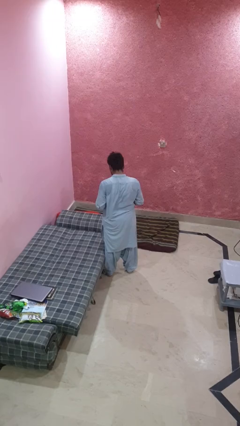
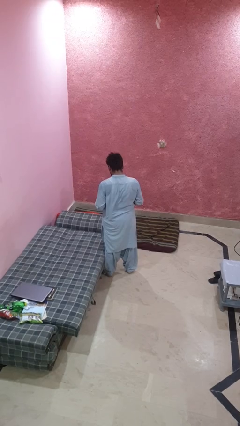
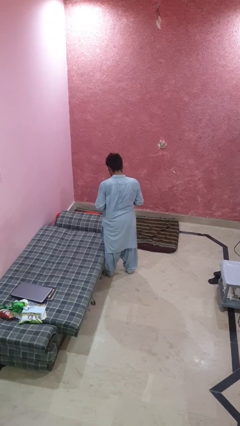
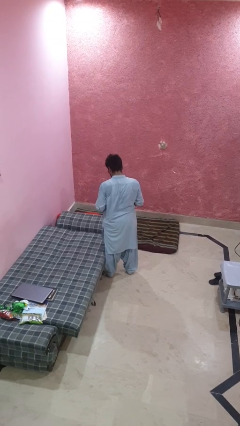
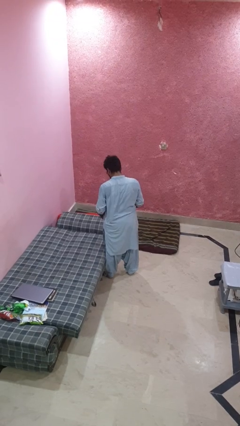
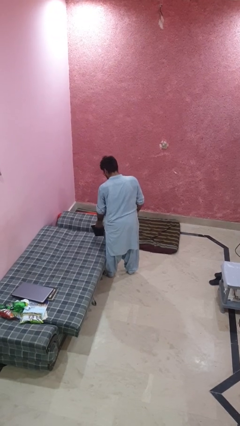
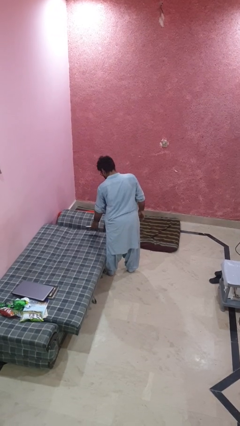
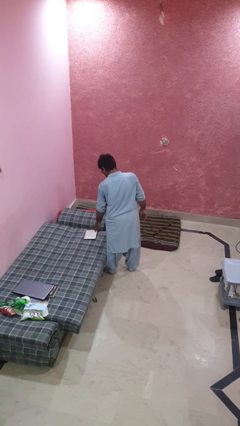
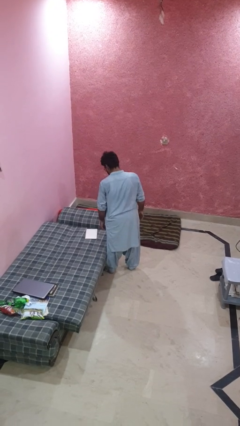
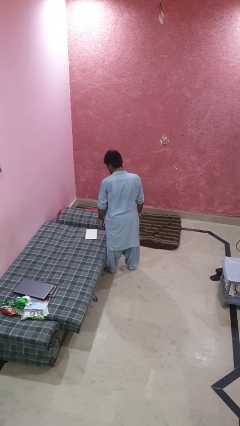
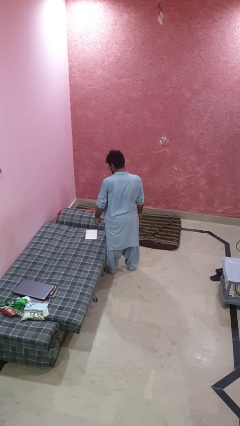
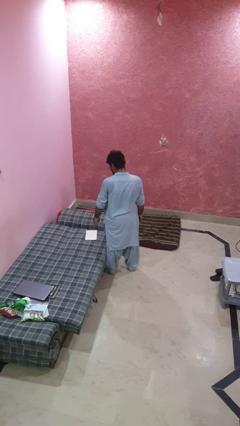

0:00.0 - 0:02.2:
person puts down object on bed

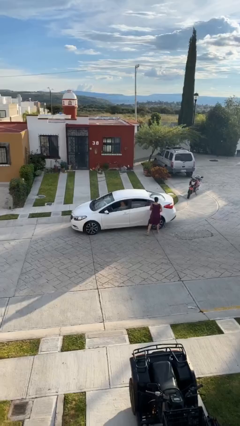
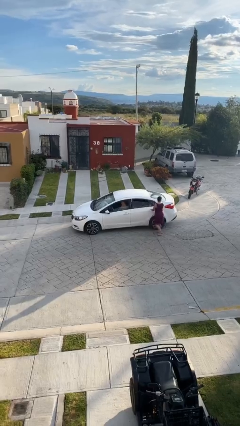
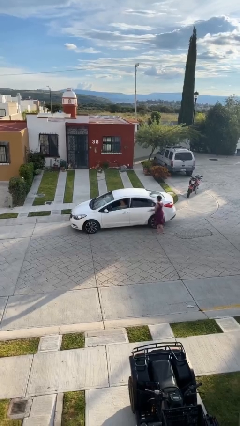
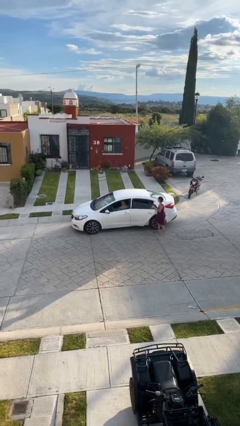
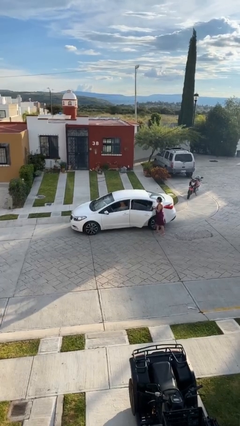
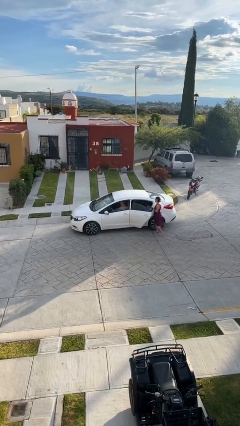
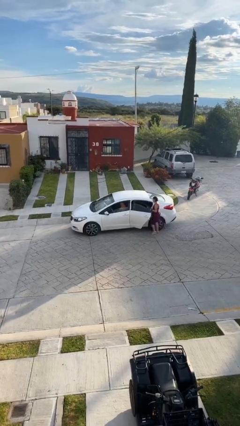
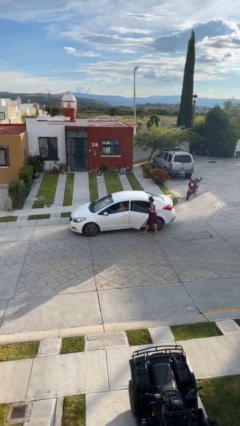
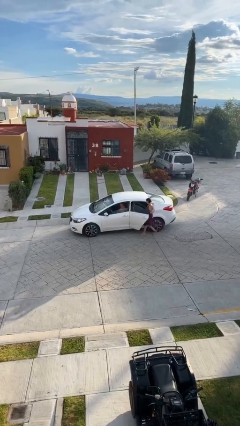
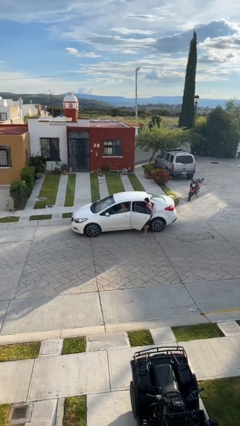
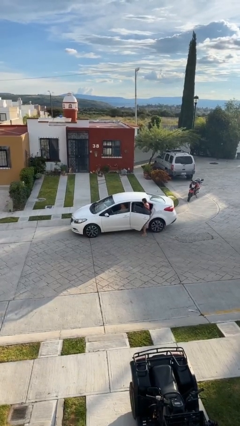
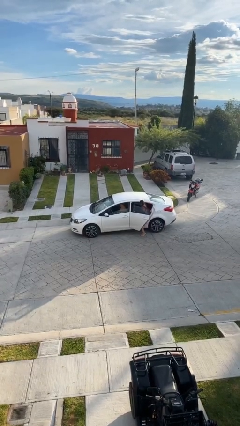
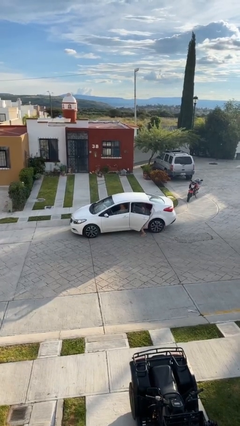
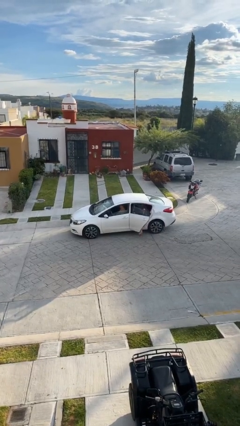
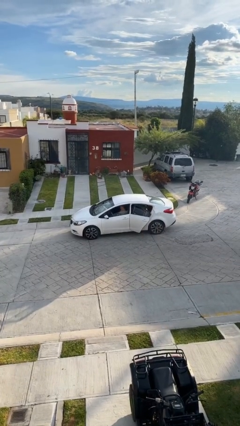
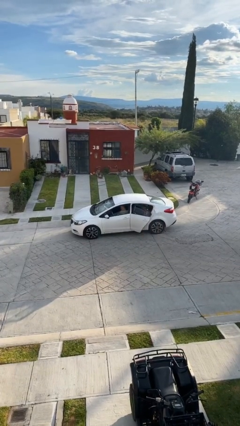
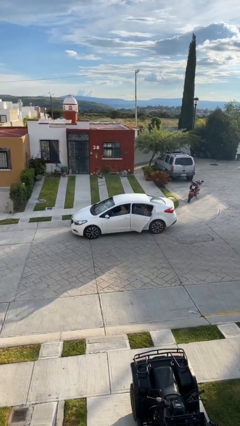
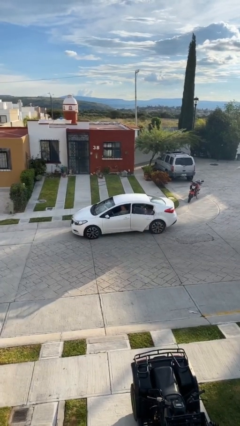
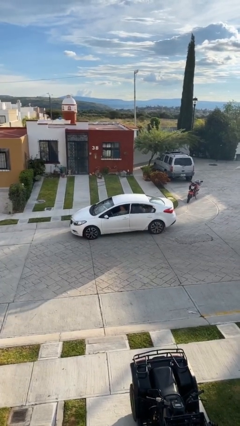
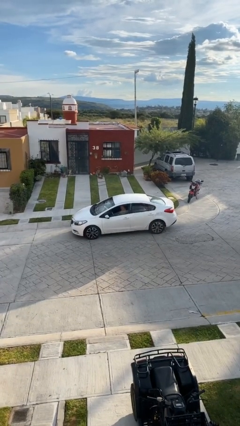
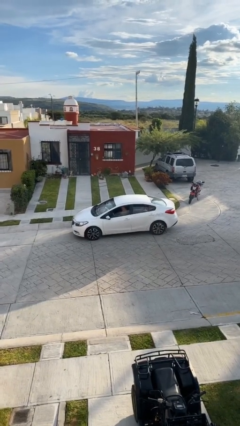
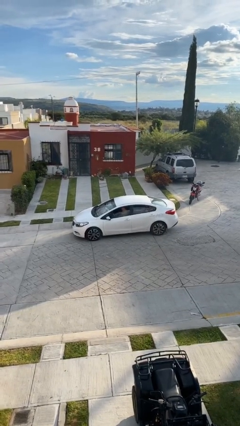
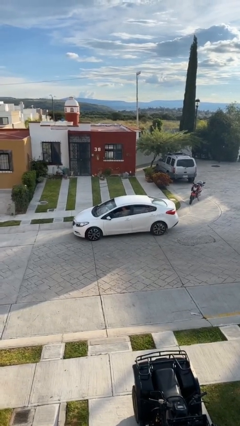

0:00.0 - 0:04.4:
car picks up person

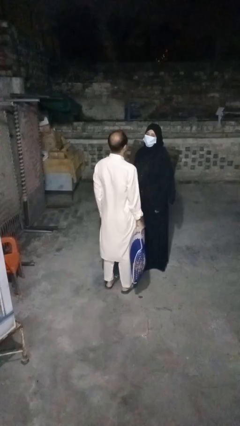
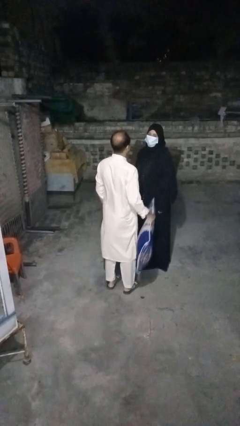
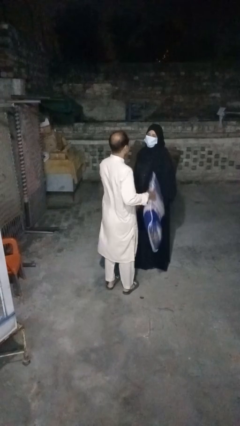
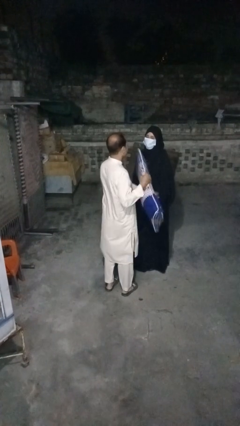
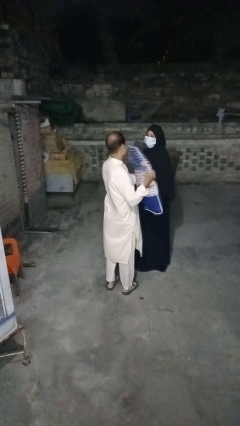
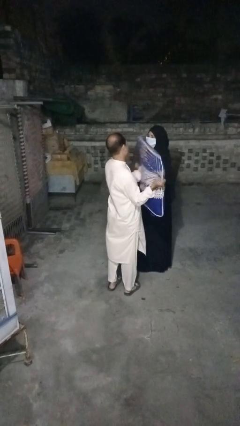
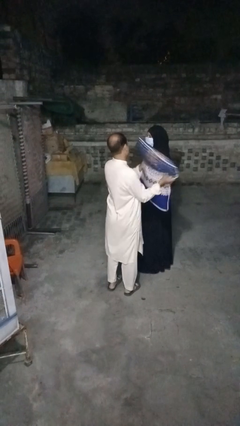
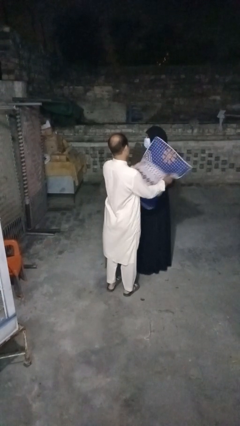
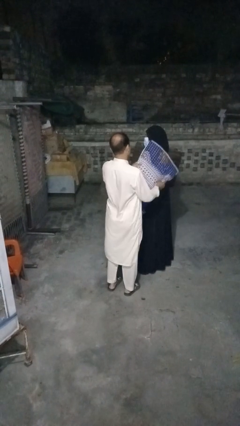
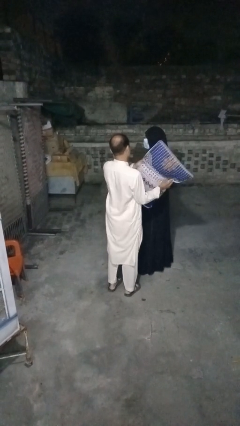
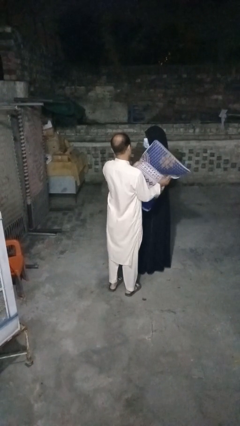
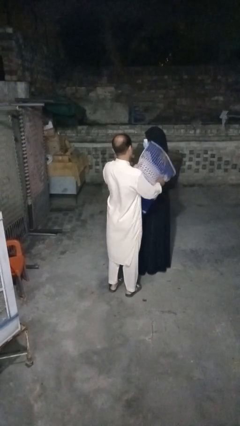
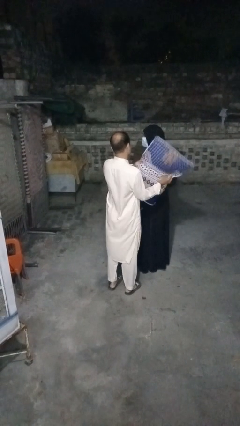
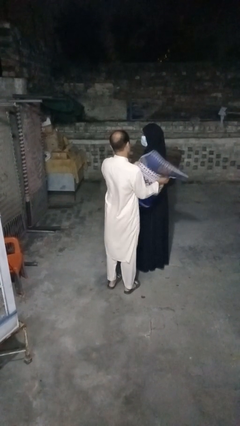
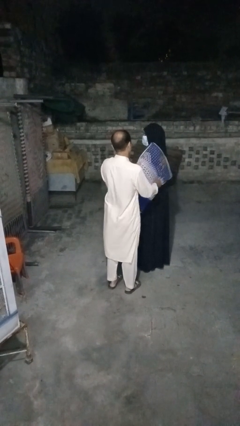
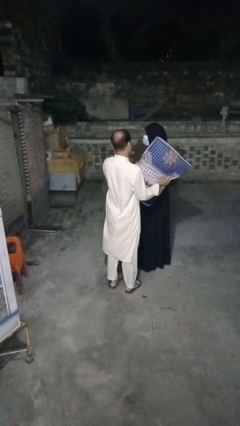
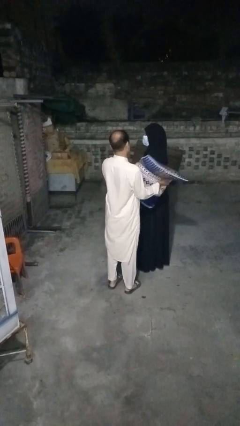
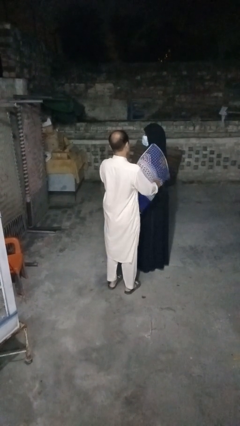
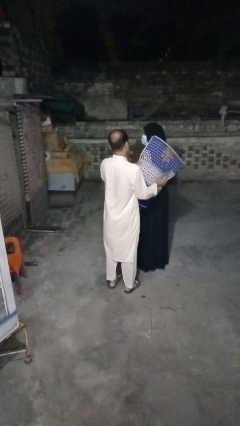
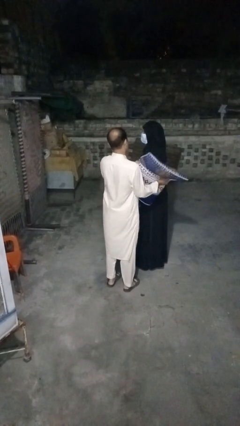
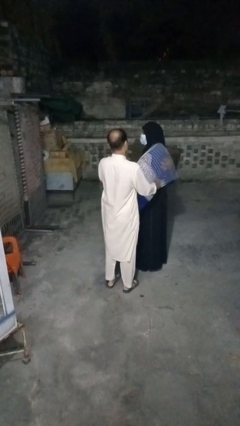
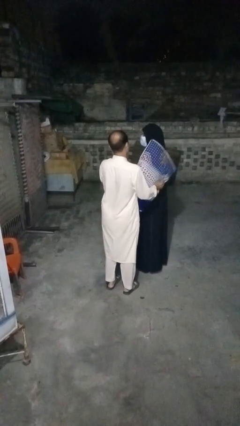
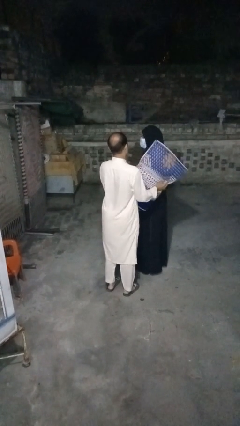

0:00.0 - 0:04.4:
person hits person with pillow

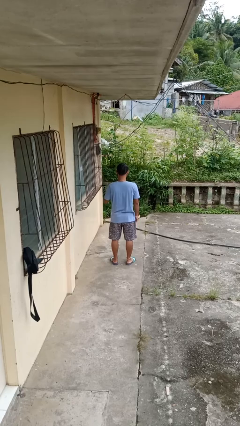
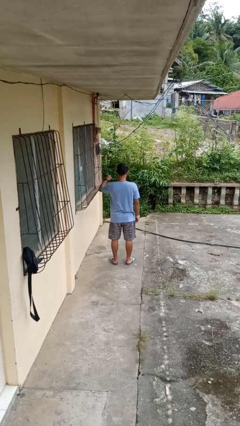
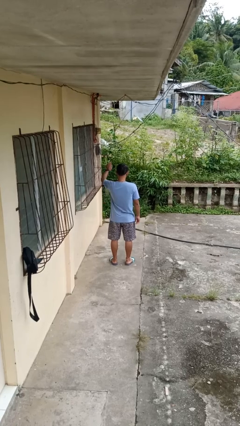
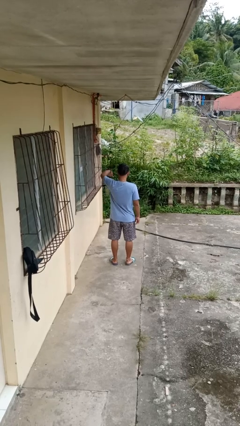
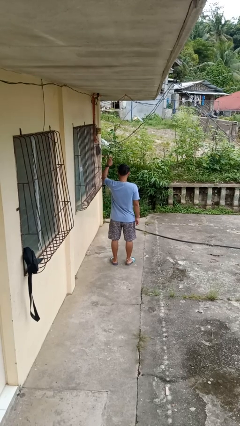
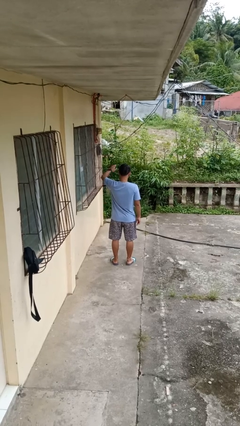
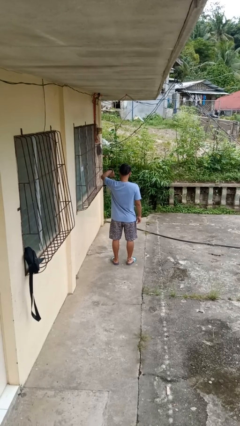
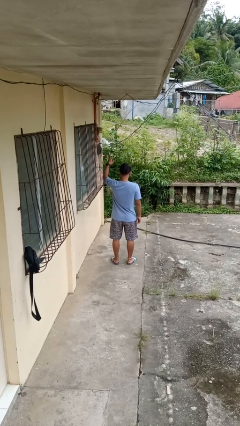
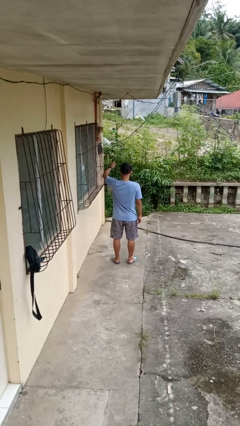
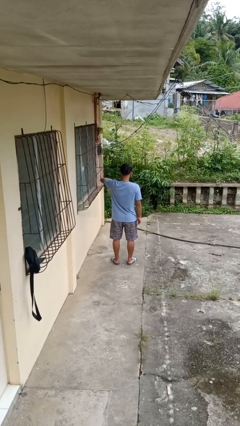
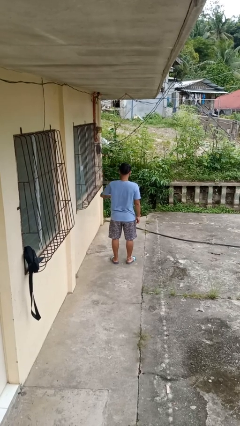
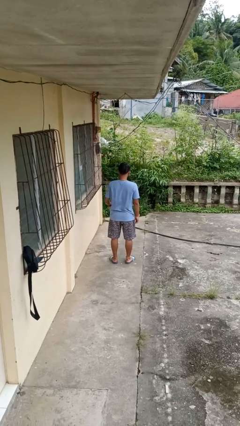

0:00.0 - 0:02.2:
person gestures come here

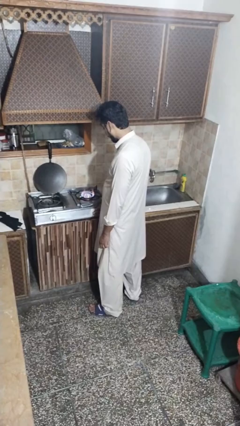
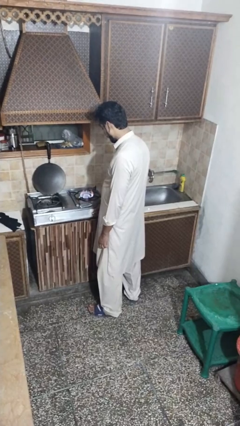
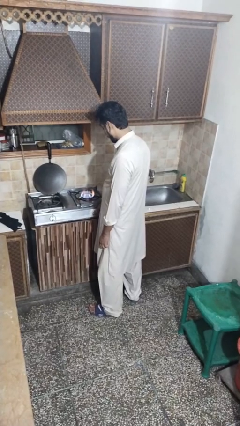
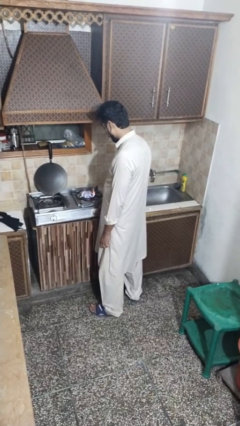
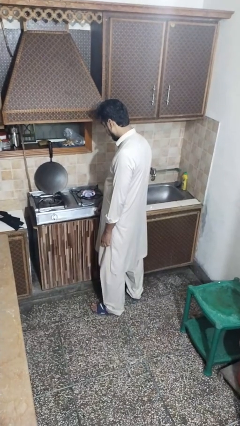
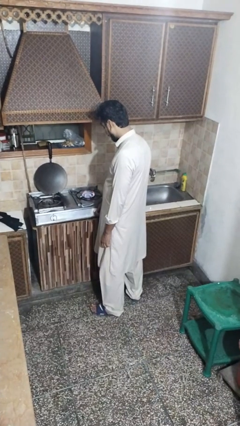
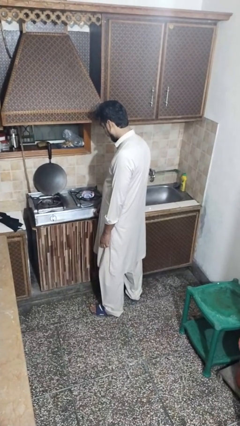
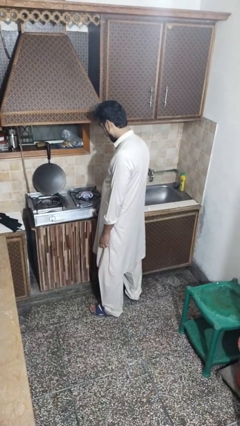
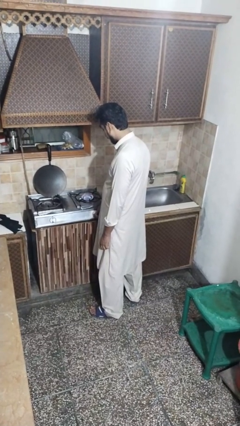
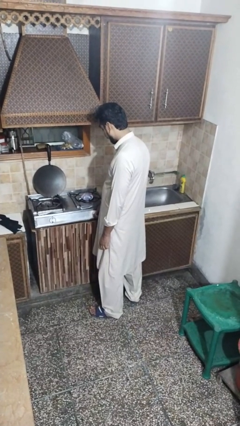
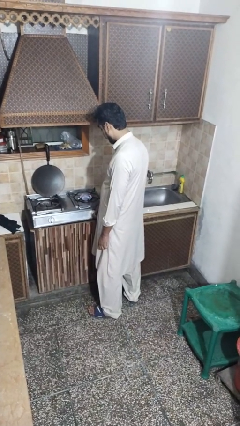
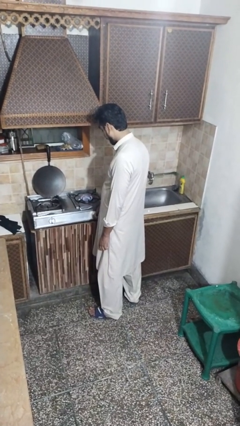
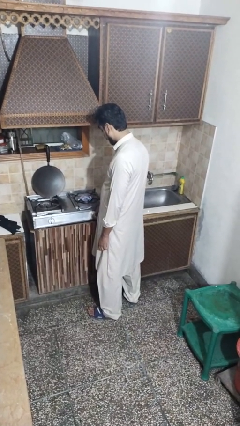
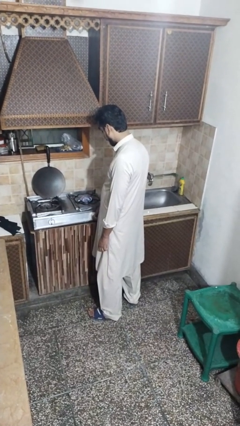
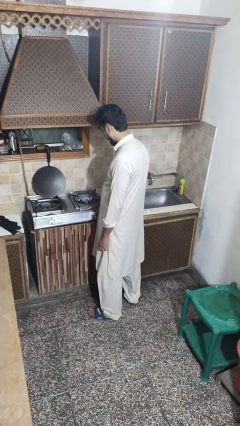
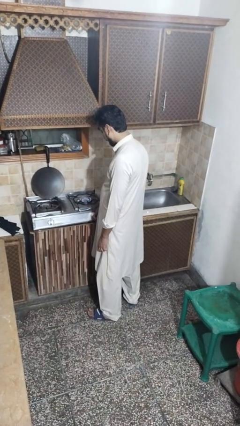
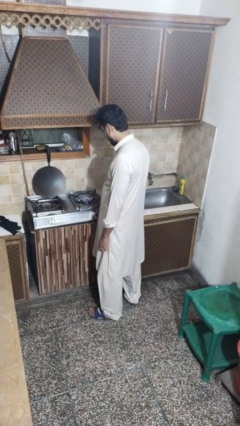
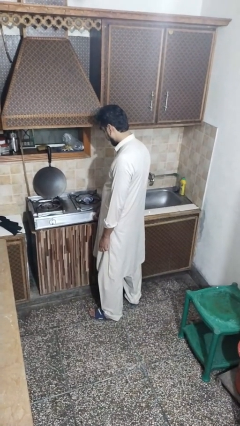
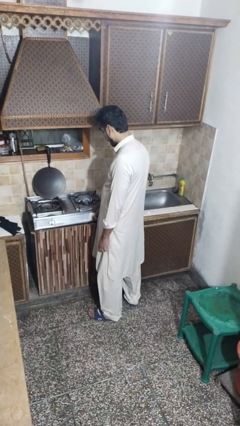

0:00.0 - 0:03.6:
person turns off stovetop

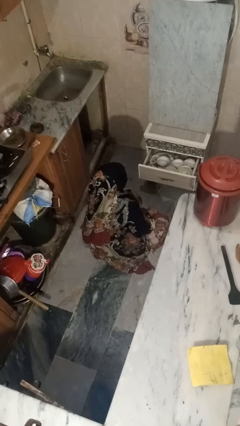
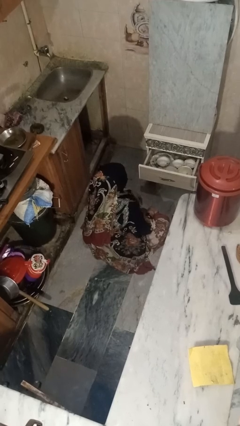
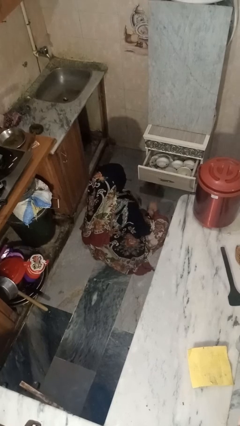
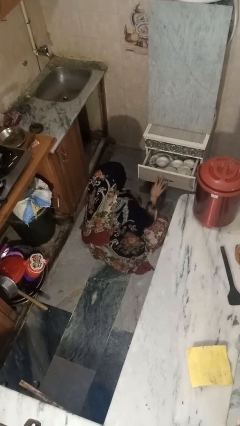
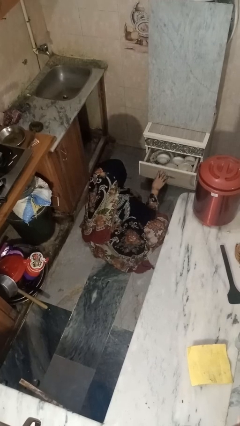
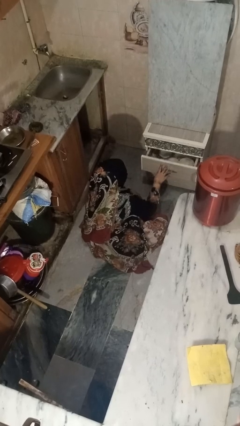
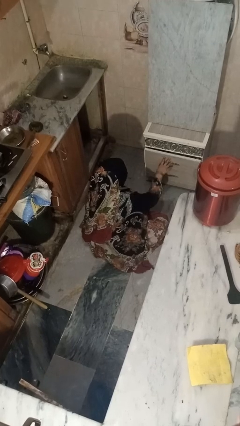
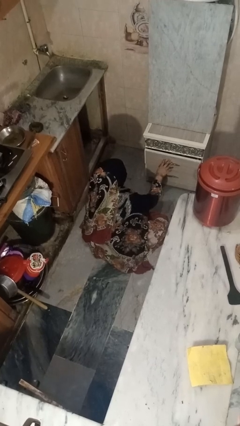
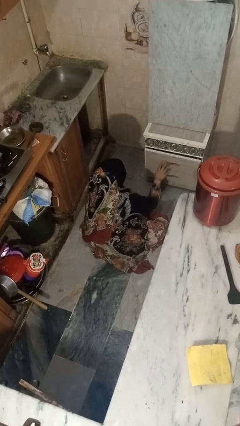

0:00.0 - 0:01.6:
person closes kitchen drawer
